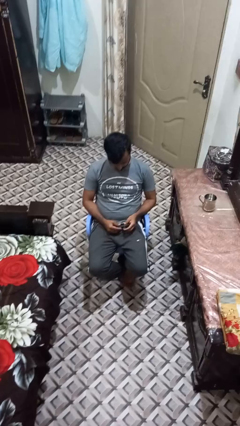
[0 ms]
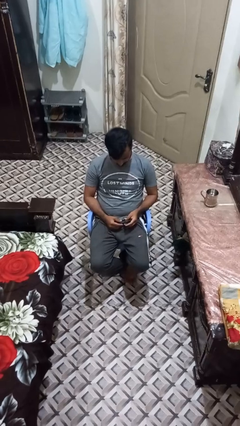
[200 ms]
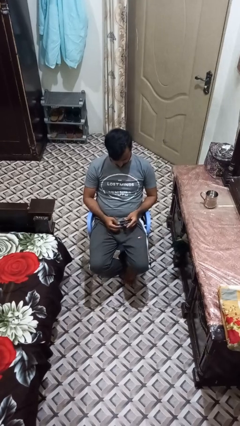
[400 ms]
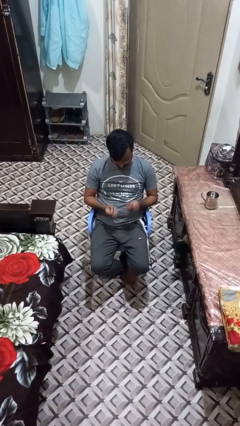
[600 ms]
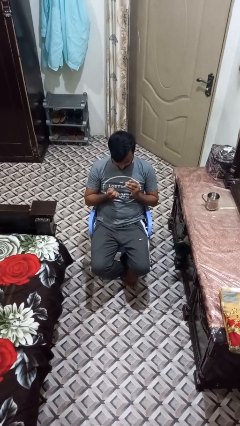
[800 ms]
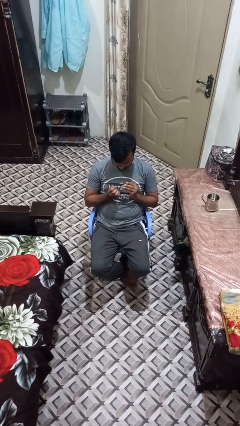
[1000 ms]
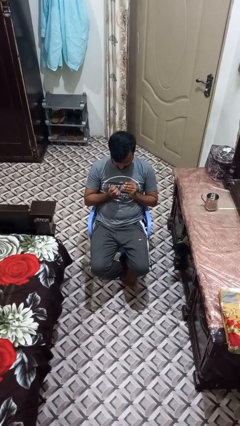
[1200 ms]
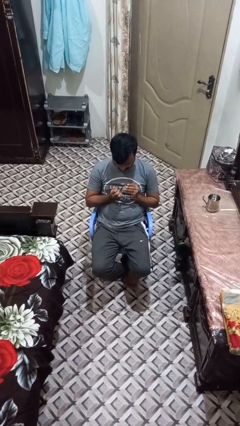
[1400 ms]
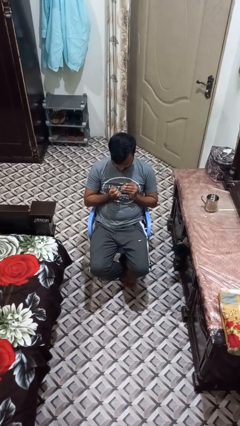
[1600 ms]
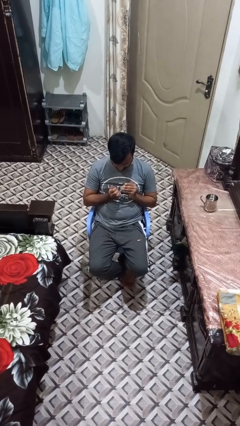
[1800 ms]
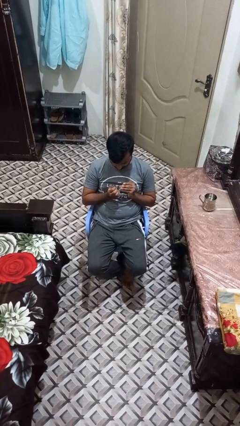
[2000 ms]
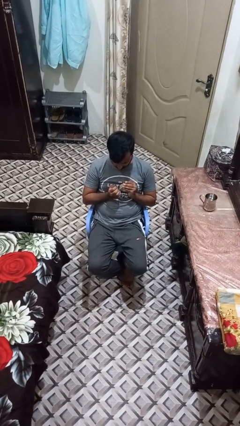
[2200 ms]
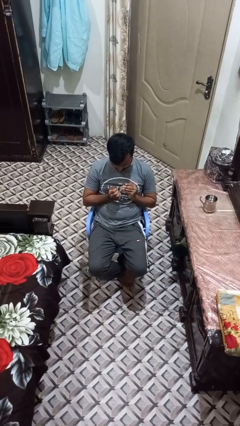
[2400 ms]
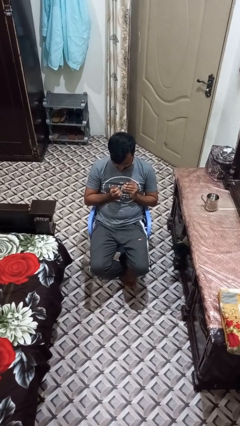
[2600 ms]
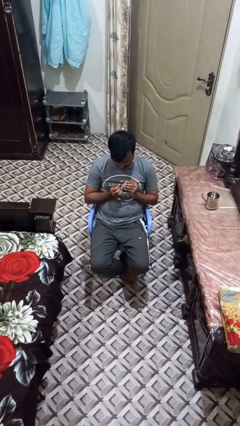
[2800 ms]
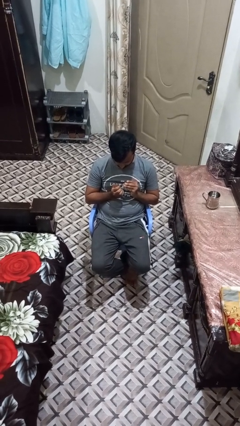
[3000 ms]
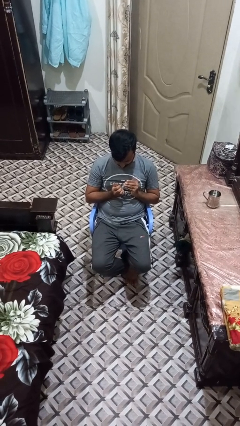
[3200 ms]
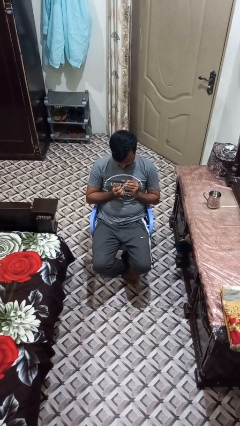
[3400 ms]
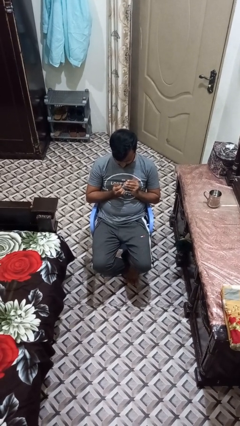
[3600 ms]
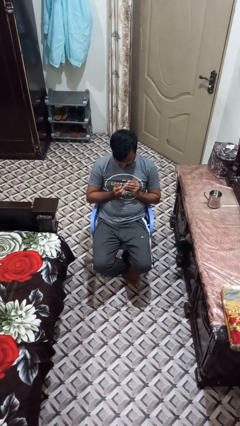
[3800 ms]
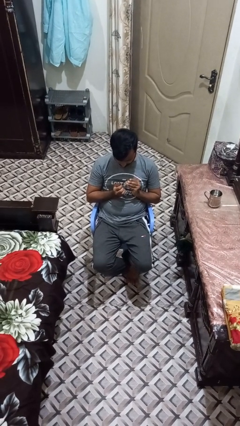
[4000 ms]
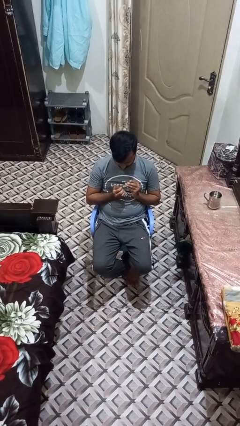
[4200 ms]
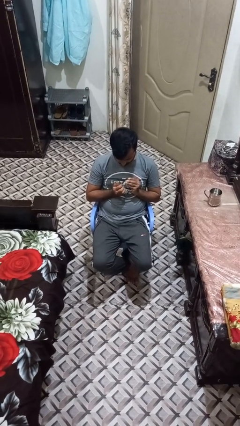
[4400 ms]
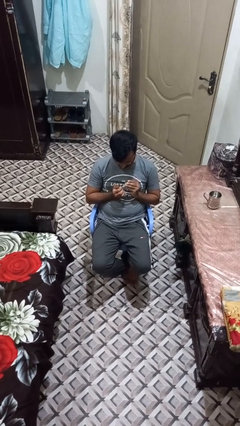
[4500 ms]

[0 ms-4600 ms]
person clips fingernails

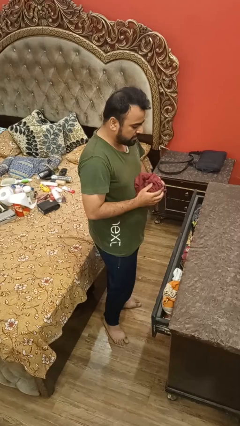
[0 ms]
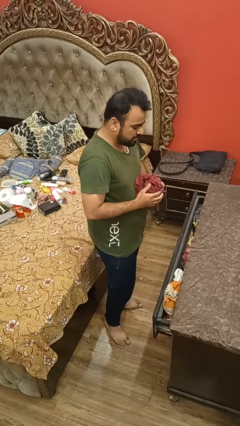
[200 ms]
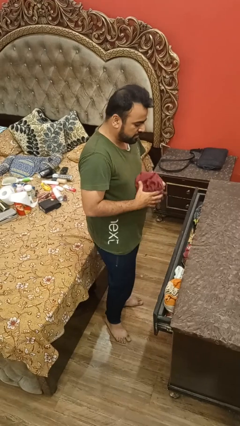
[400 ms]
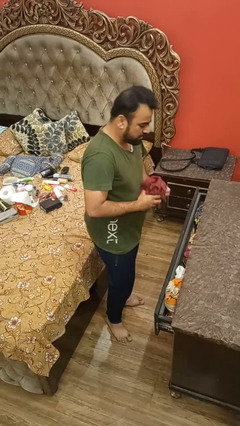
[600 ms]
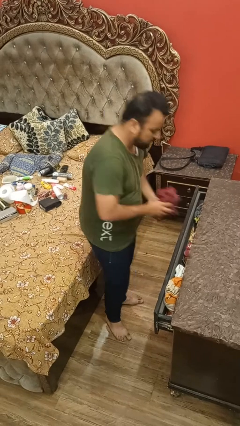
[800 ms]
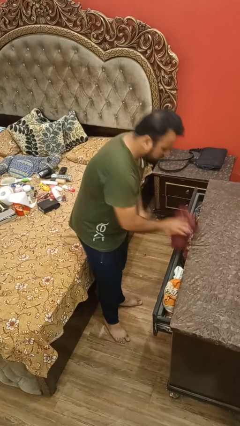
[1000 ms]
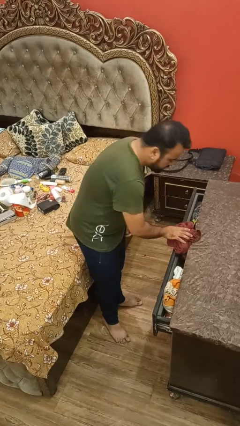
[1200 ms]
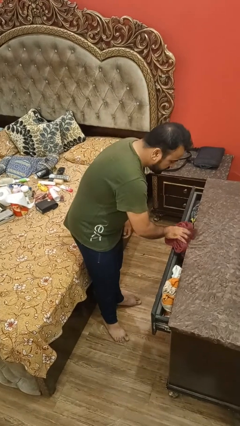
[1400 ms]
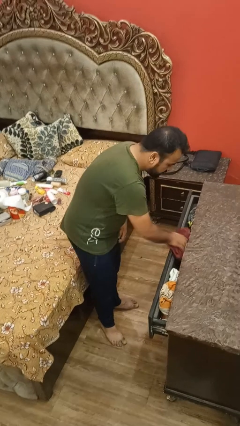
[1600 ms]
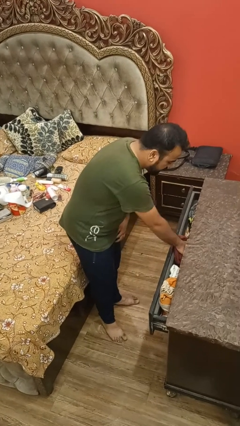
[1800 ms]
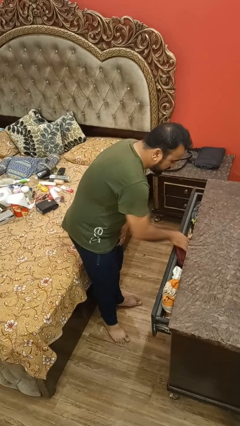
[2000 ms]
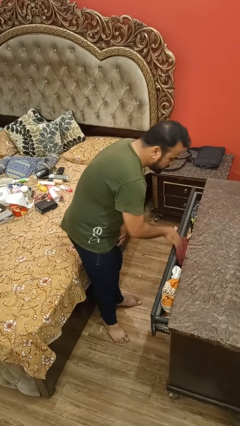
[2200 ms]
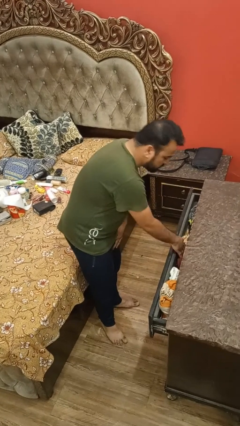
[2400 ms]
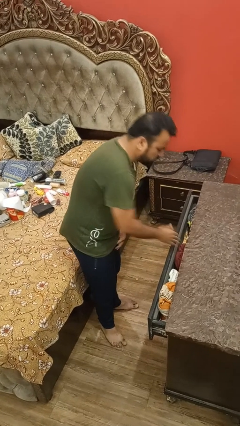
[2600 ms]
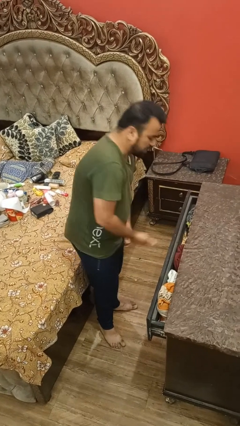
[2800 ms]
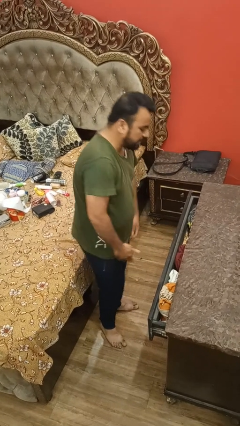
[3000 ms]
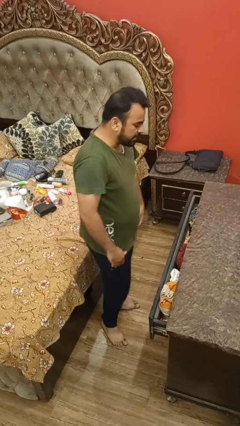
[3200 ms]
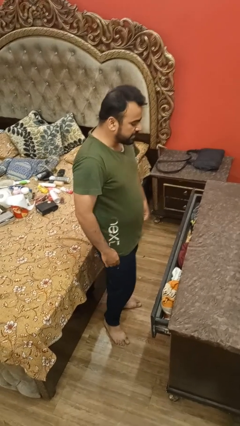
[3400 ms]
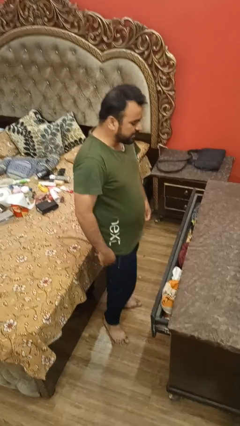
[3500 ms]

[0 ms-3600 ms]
person takes clothes from dresser

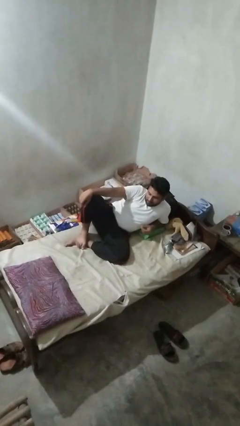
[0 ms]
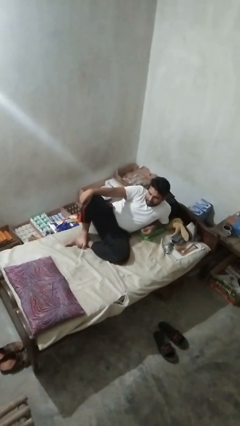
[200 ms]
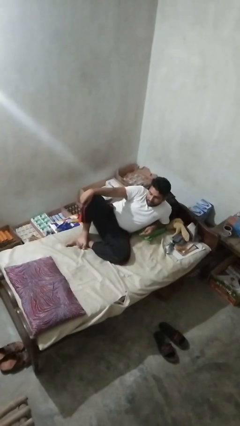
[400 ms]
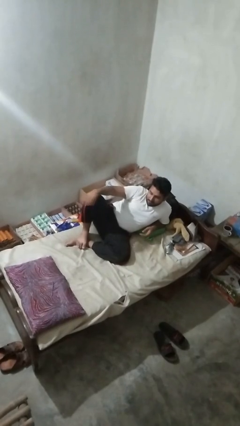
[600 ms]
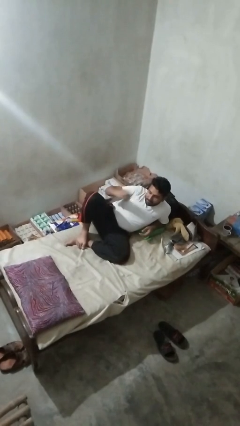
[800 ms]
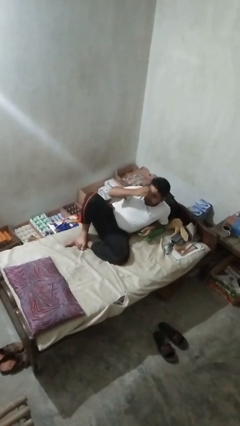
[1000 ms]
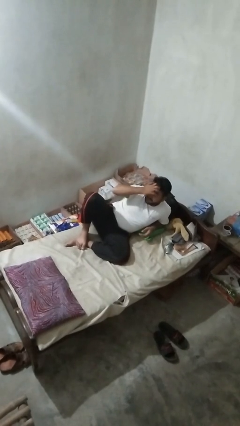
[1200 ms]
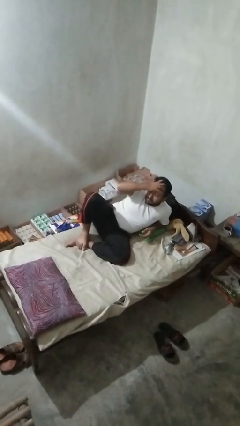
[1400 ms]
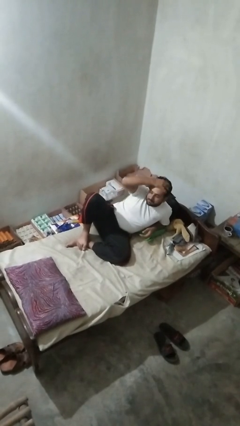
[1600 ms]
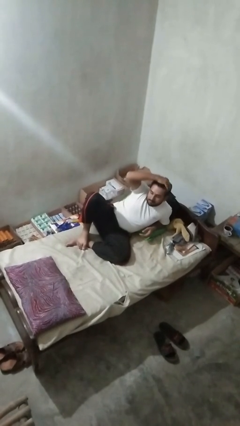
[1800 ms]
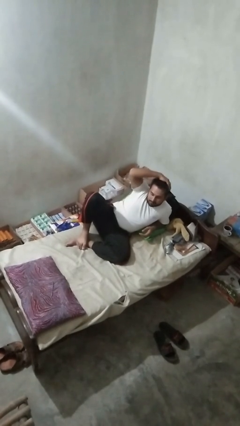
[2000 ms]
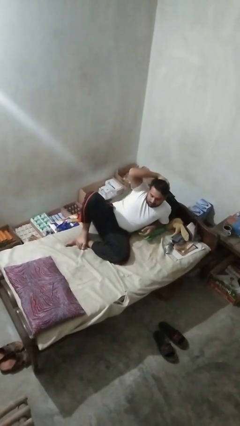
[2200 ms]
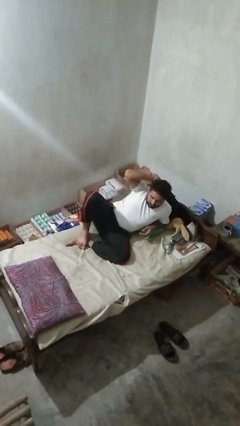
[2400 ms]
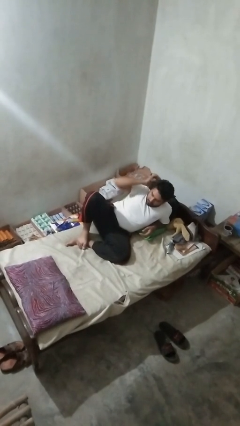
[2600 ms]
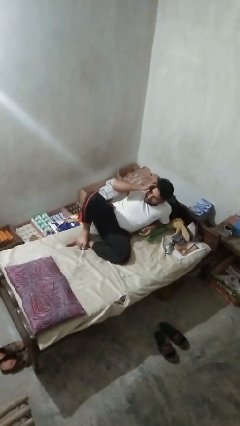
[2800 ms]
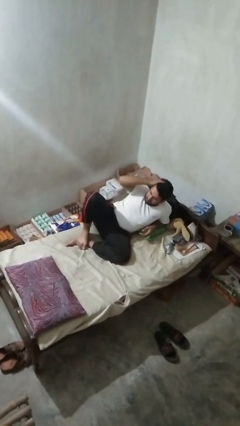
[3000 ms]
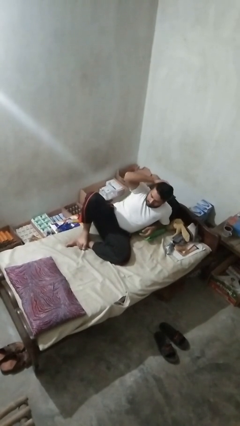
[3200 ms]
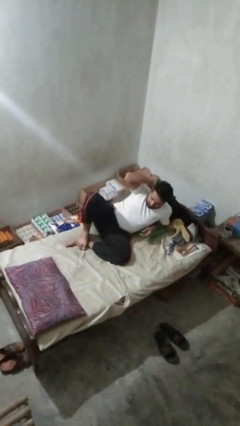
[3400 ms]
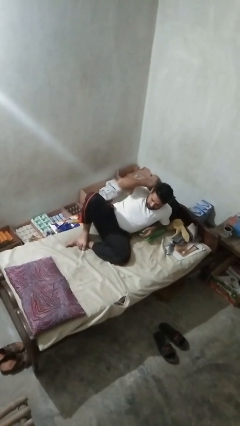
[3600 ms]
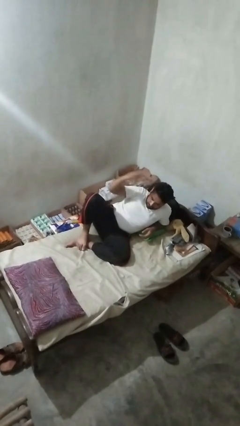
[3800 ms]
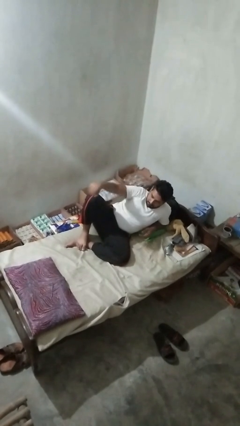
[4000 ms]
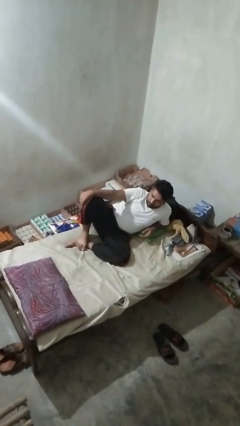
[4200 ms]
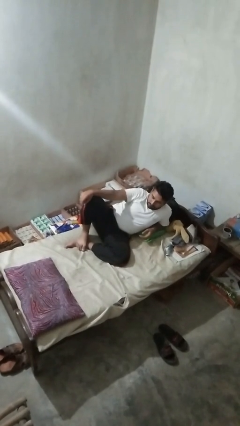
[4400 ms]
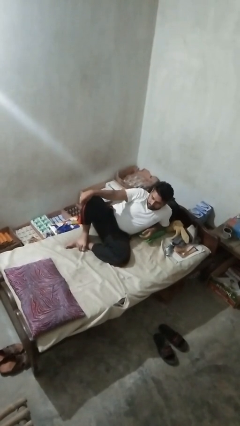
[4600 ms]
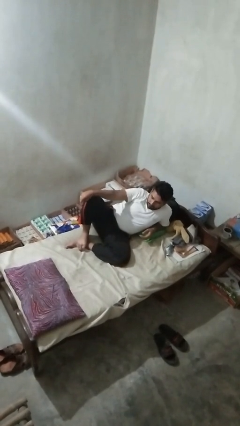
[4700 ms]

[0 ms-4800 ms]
person strokes hair

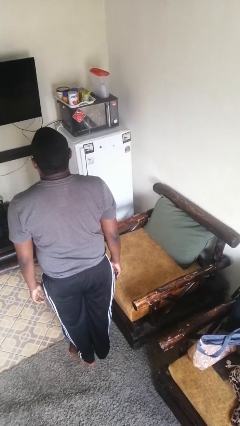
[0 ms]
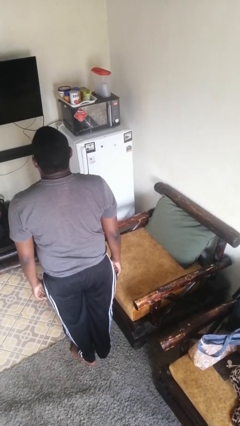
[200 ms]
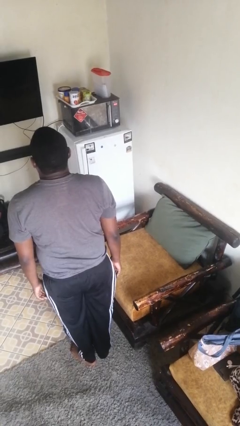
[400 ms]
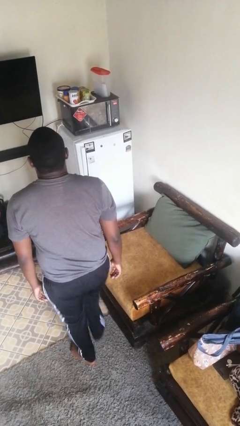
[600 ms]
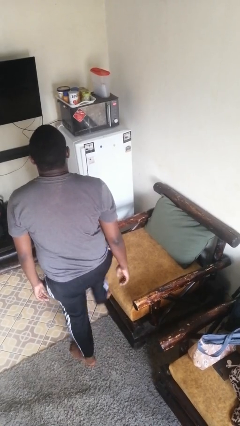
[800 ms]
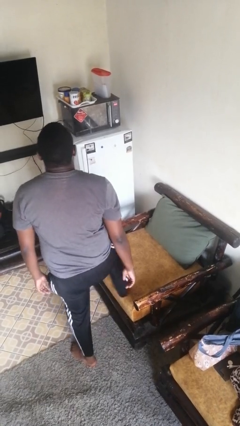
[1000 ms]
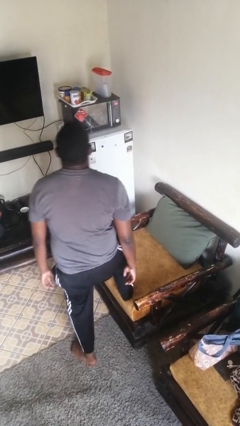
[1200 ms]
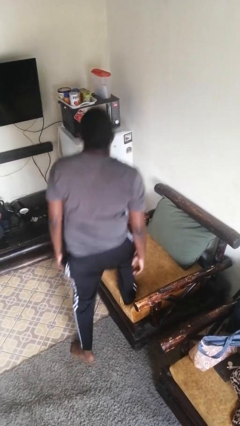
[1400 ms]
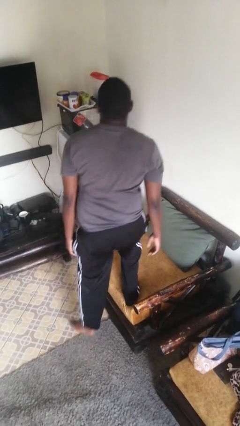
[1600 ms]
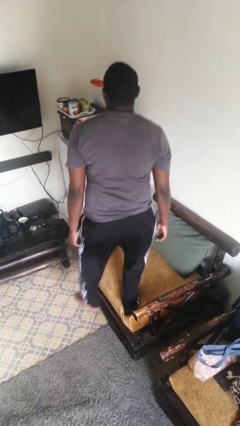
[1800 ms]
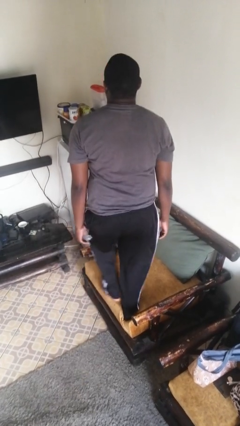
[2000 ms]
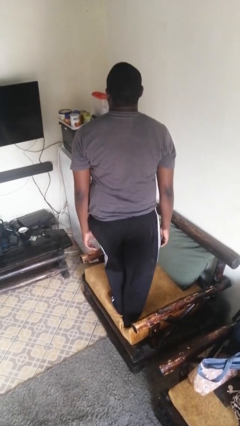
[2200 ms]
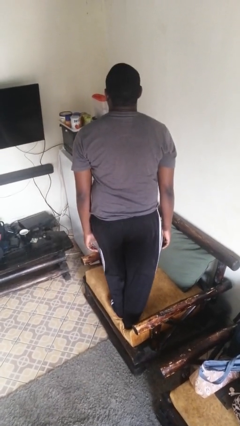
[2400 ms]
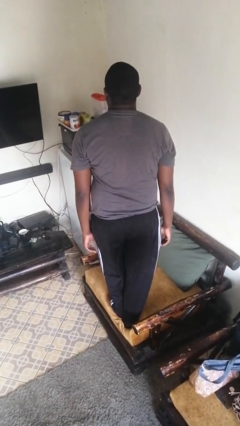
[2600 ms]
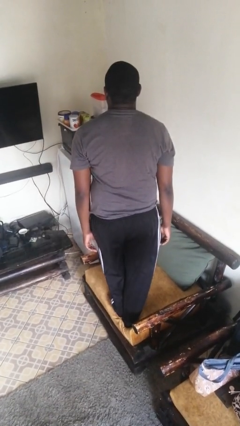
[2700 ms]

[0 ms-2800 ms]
person climbs on couch

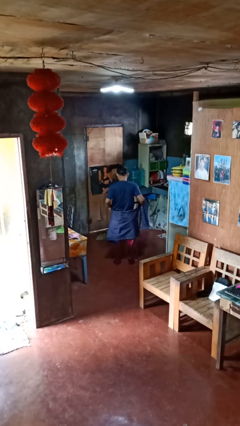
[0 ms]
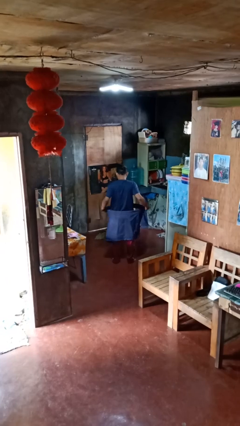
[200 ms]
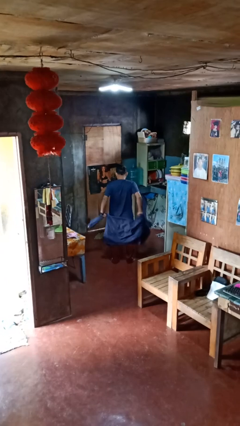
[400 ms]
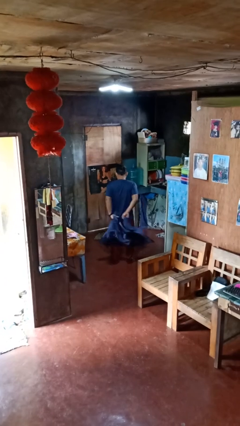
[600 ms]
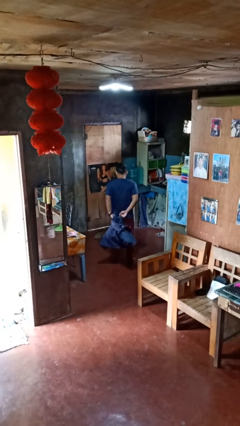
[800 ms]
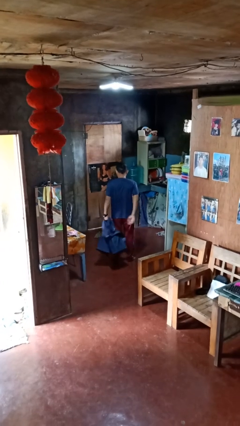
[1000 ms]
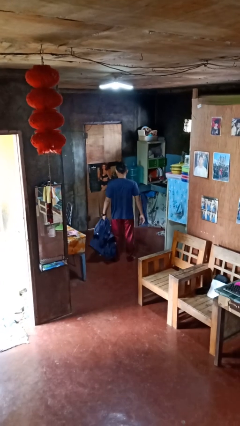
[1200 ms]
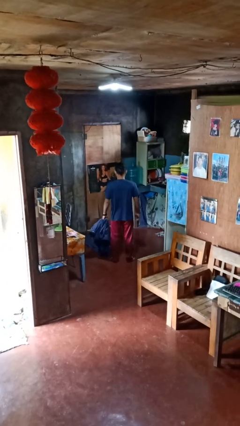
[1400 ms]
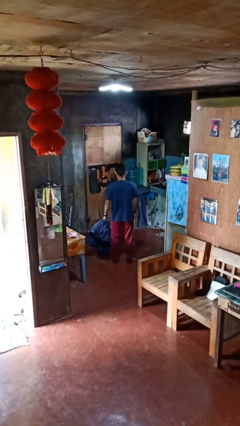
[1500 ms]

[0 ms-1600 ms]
person unties jacket around waist

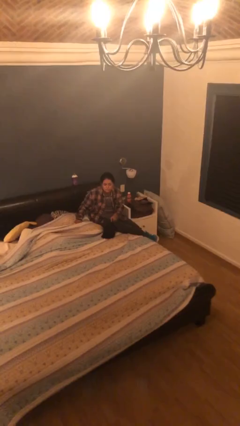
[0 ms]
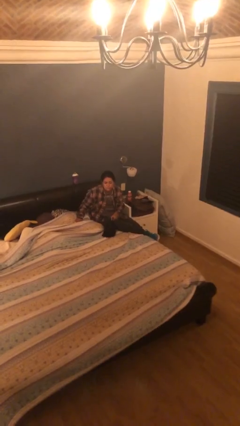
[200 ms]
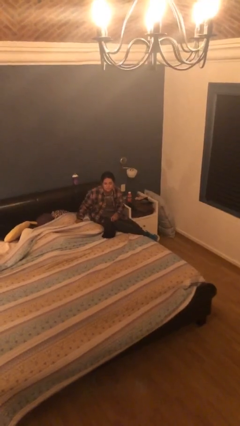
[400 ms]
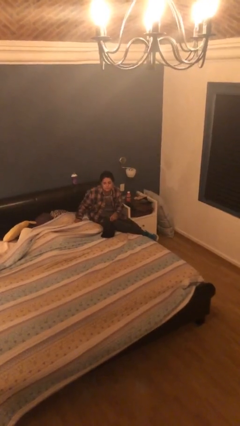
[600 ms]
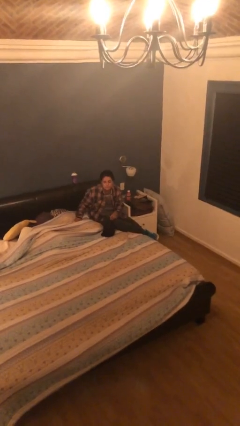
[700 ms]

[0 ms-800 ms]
person takes off hat
